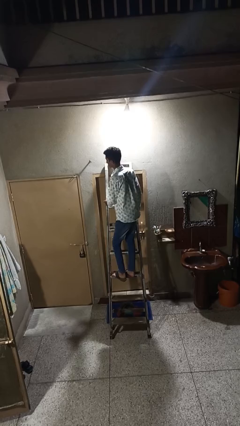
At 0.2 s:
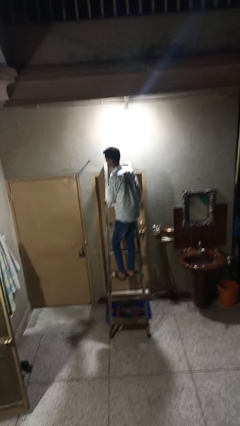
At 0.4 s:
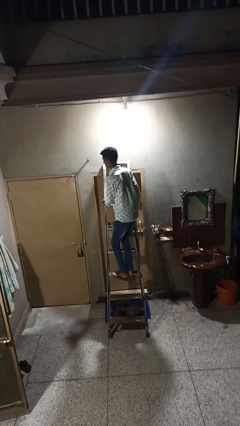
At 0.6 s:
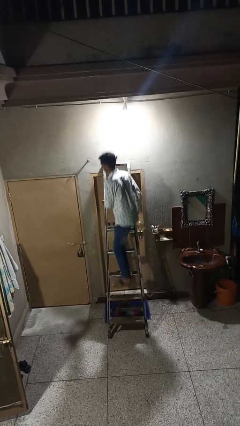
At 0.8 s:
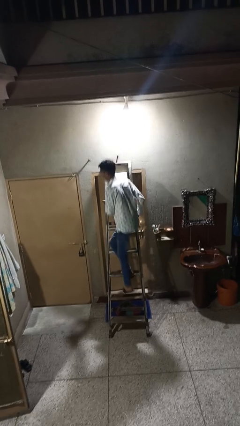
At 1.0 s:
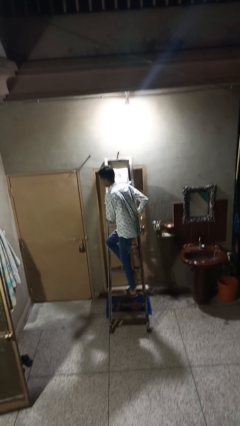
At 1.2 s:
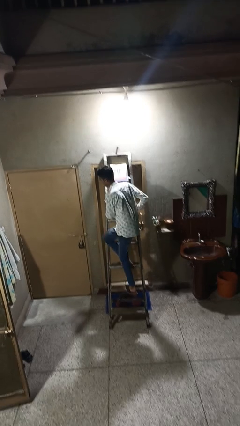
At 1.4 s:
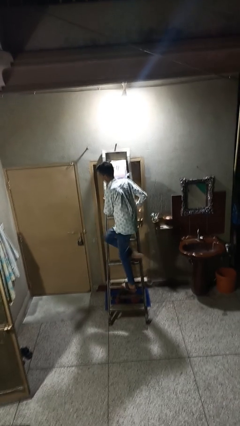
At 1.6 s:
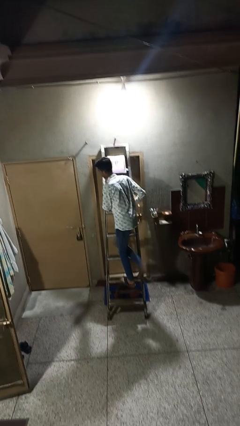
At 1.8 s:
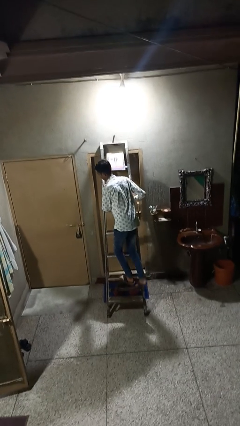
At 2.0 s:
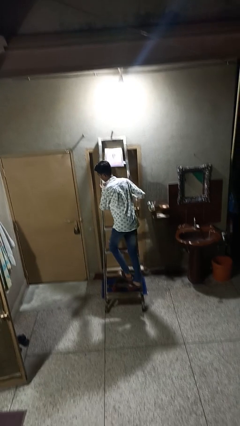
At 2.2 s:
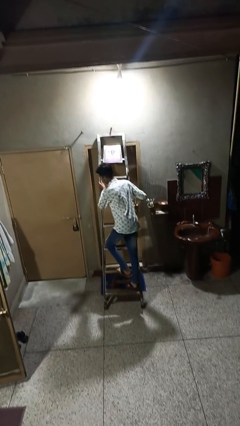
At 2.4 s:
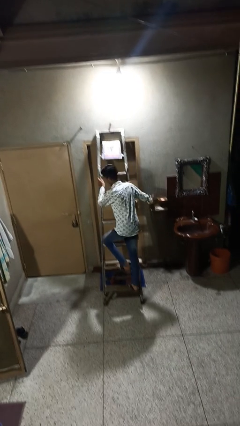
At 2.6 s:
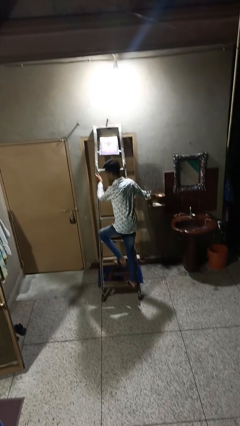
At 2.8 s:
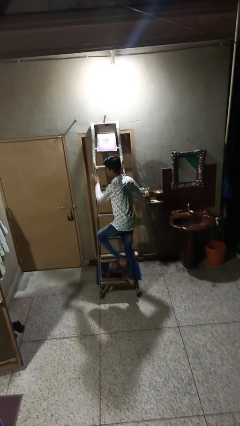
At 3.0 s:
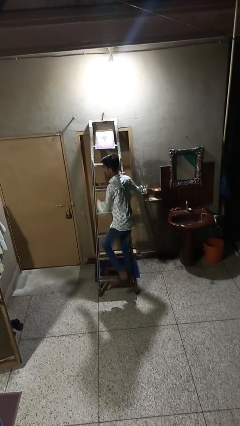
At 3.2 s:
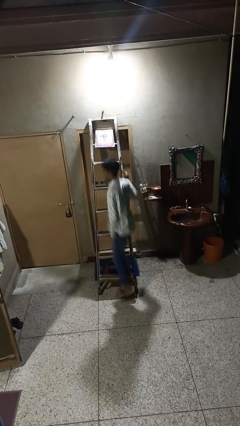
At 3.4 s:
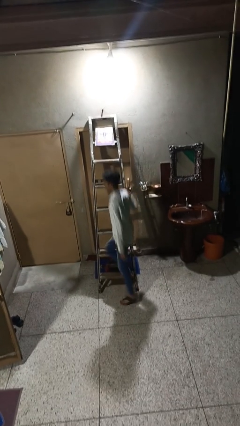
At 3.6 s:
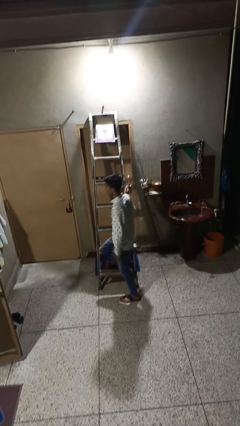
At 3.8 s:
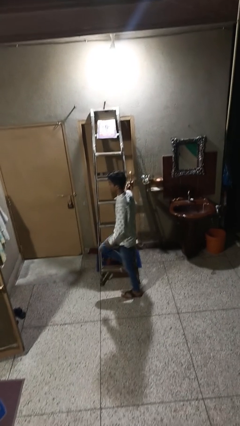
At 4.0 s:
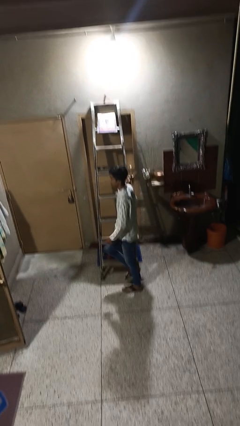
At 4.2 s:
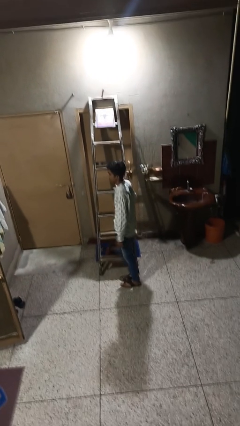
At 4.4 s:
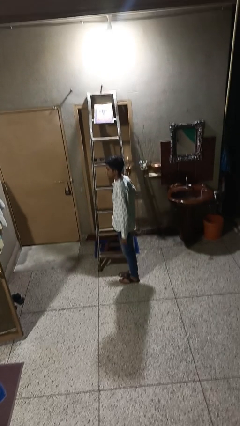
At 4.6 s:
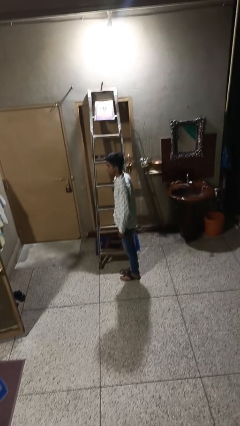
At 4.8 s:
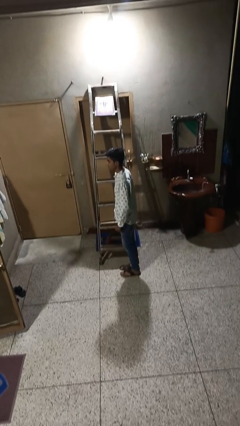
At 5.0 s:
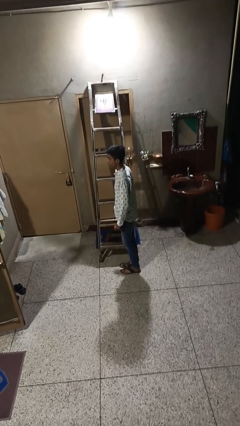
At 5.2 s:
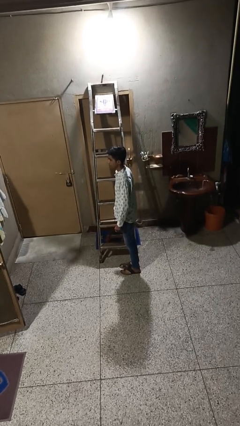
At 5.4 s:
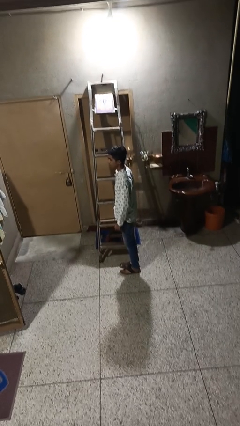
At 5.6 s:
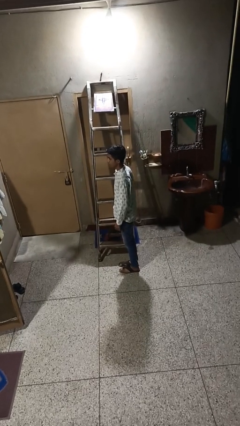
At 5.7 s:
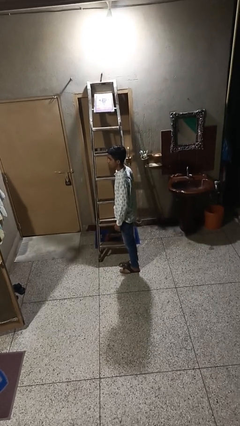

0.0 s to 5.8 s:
person climbs down ladder

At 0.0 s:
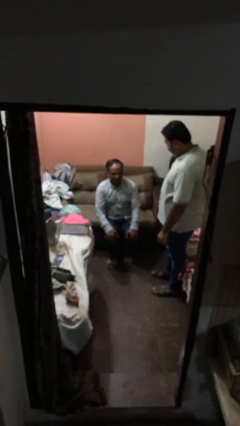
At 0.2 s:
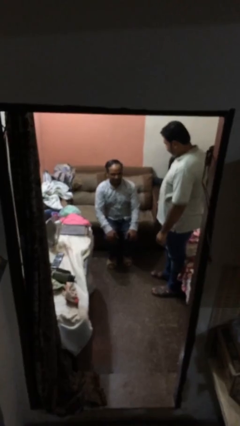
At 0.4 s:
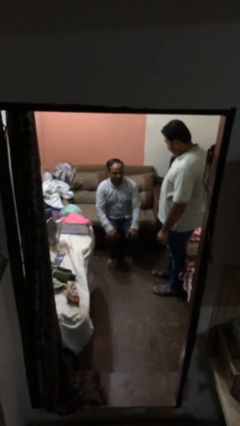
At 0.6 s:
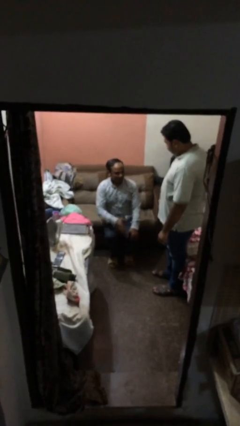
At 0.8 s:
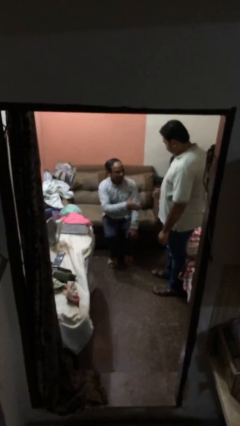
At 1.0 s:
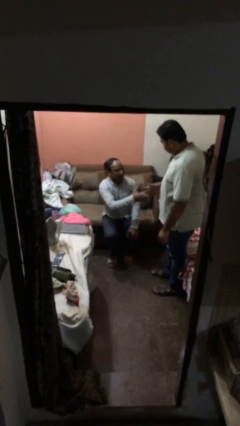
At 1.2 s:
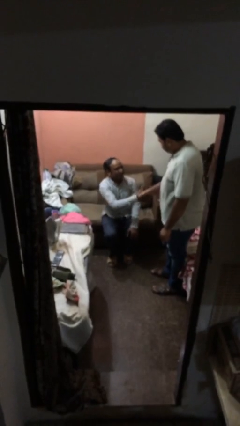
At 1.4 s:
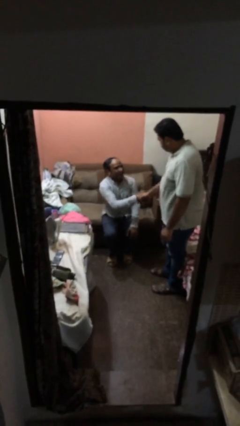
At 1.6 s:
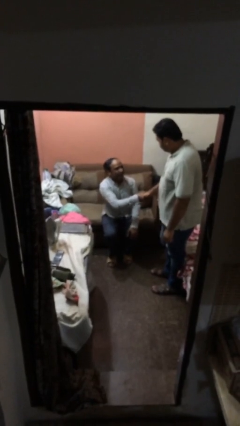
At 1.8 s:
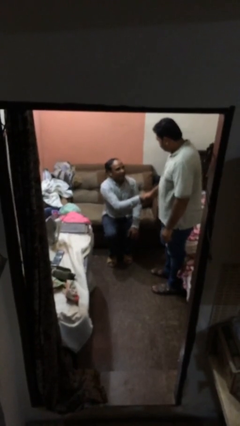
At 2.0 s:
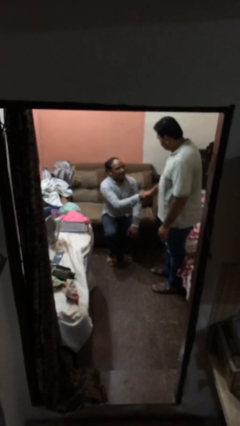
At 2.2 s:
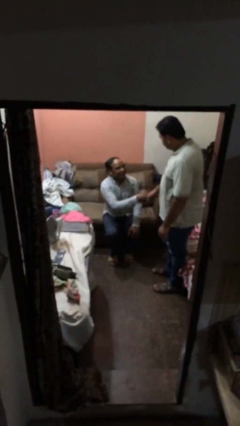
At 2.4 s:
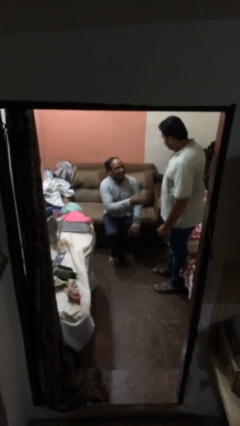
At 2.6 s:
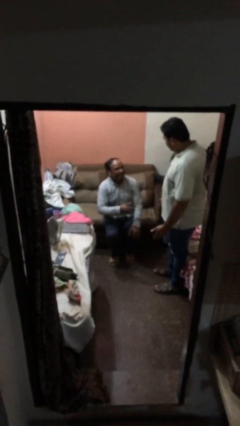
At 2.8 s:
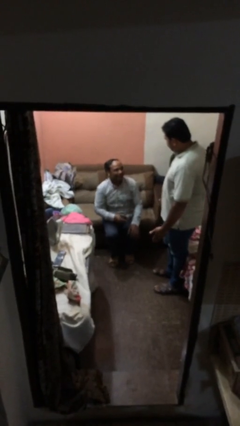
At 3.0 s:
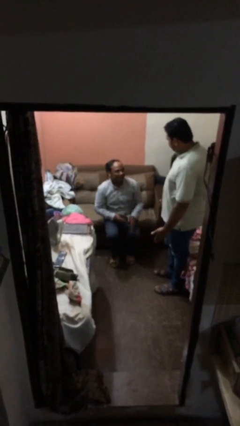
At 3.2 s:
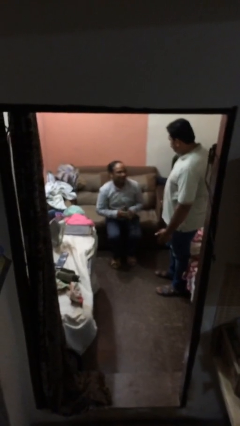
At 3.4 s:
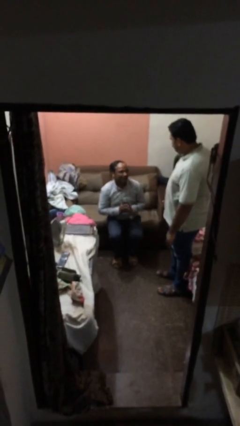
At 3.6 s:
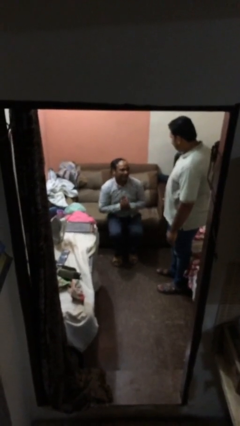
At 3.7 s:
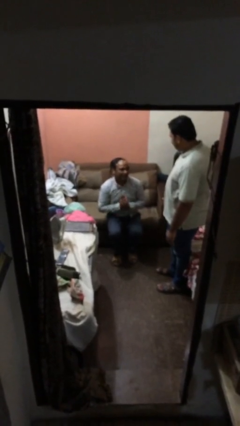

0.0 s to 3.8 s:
person shakes hand

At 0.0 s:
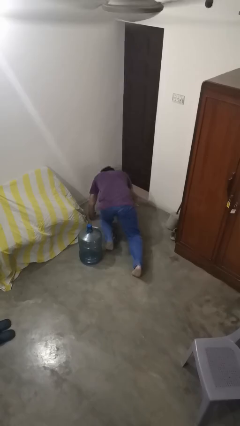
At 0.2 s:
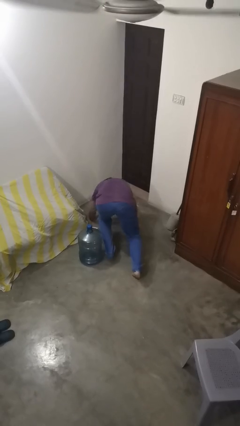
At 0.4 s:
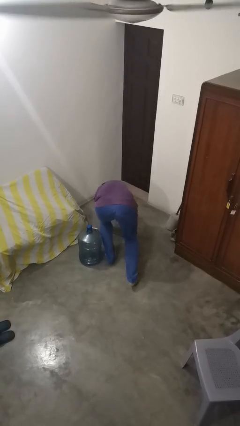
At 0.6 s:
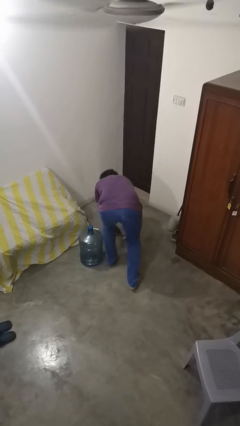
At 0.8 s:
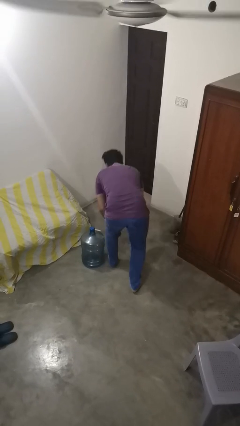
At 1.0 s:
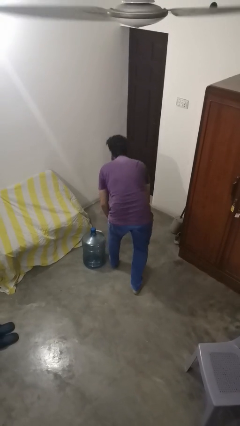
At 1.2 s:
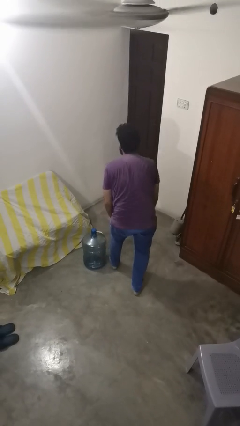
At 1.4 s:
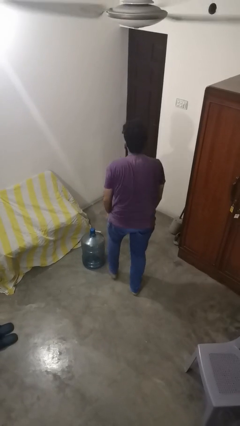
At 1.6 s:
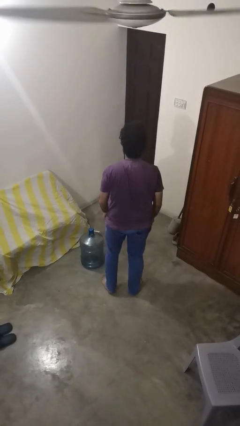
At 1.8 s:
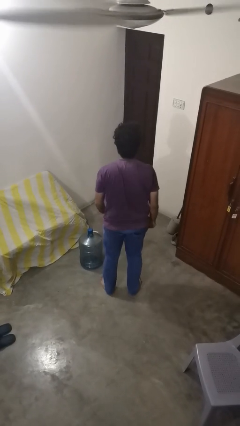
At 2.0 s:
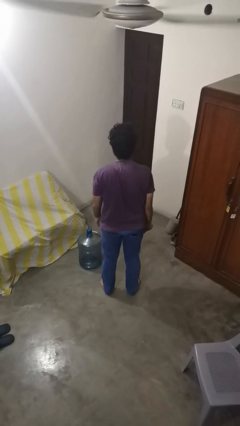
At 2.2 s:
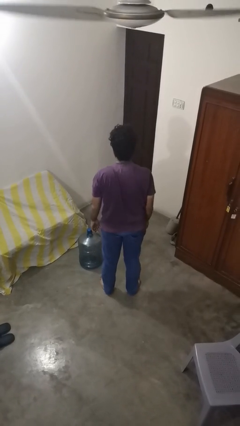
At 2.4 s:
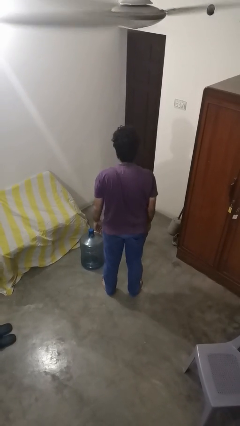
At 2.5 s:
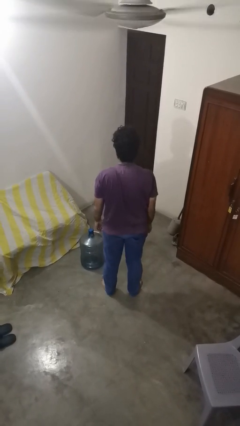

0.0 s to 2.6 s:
person stands up from floor

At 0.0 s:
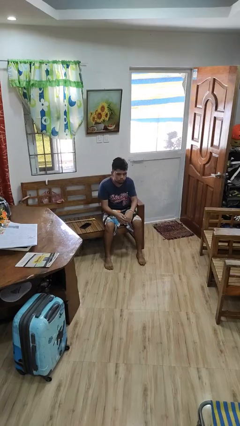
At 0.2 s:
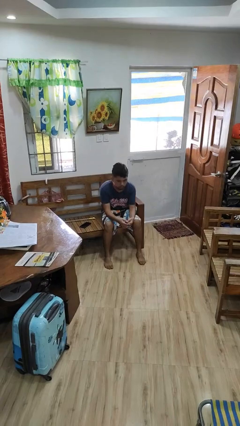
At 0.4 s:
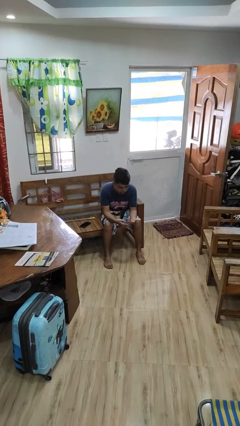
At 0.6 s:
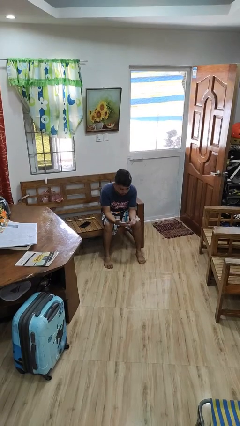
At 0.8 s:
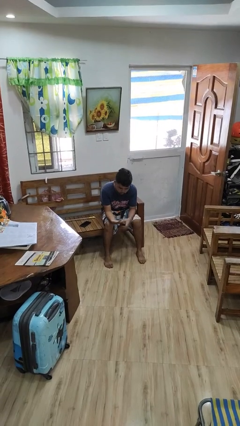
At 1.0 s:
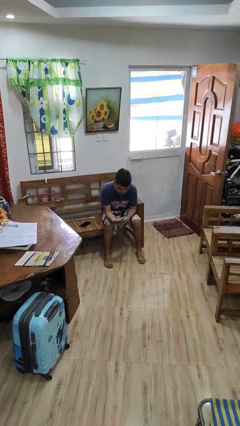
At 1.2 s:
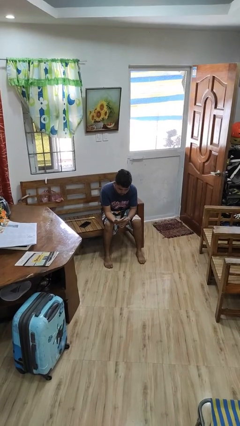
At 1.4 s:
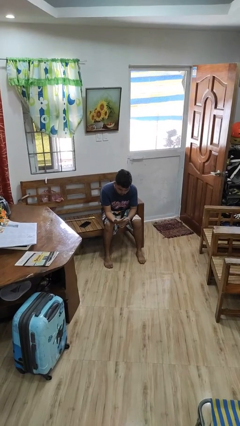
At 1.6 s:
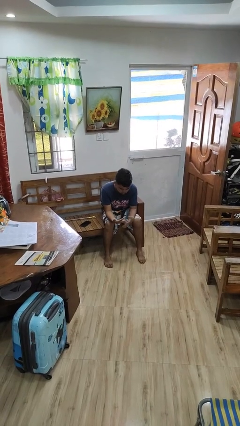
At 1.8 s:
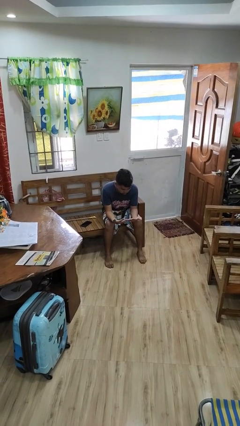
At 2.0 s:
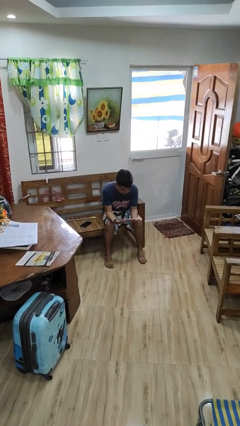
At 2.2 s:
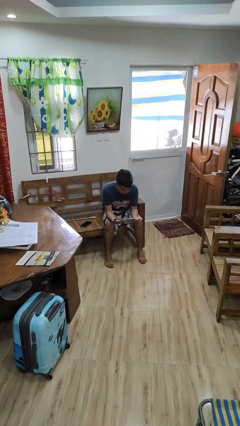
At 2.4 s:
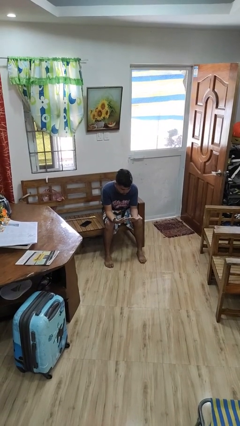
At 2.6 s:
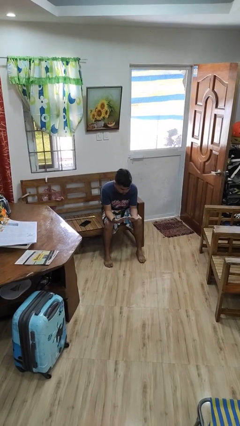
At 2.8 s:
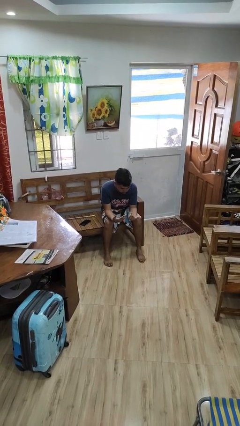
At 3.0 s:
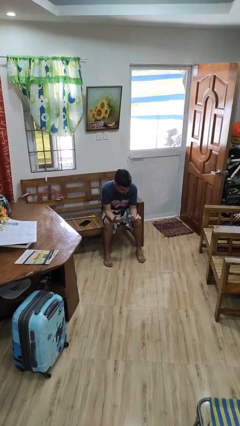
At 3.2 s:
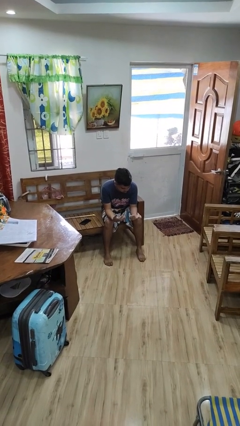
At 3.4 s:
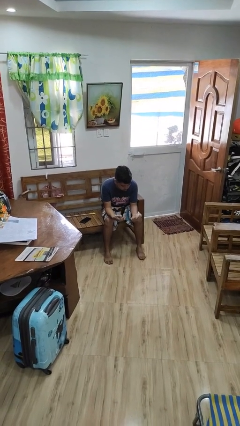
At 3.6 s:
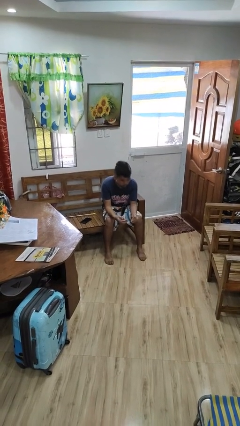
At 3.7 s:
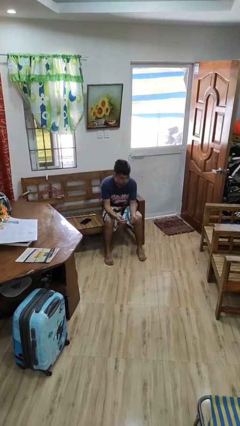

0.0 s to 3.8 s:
person looks at hands in lap

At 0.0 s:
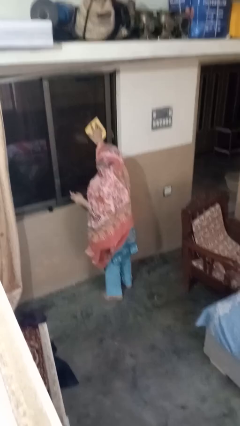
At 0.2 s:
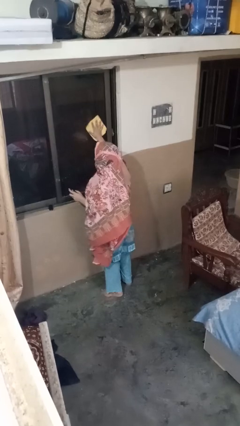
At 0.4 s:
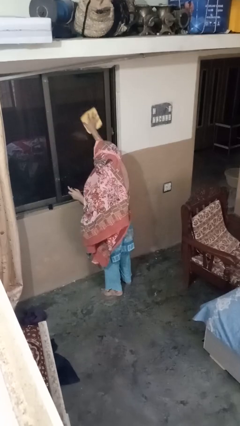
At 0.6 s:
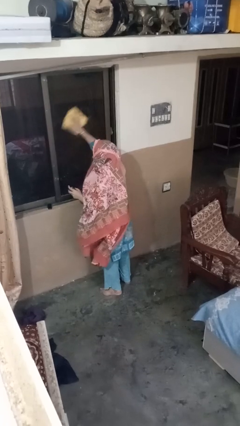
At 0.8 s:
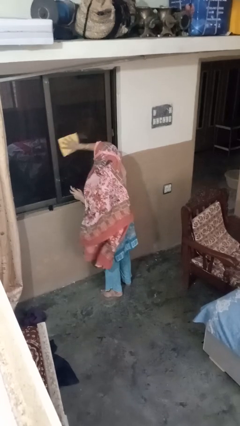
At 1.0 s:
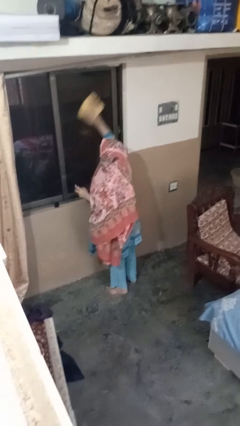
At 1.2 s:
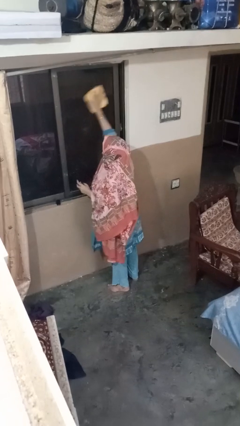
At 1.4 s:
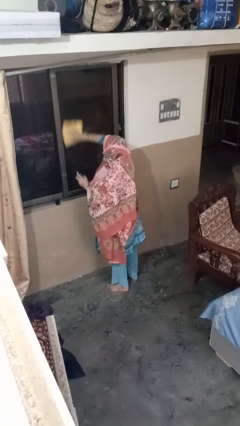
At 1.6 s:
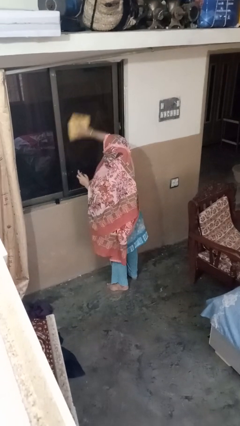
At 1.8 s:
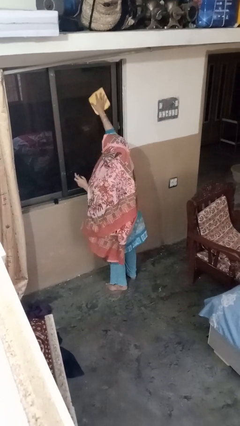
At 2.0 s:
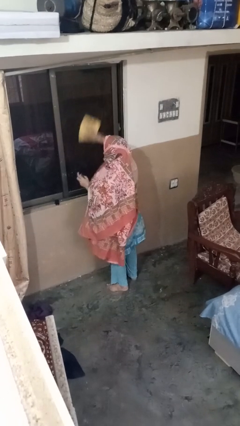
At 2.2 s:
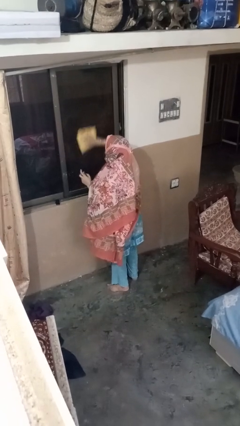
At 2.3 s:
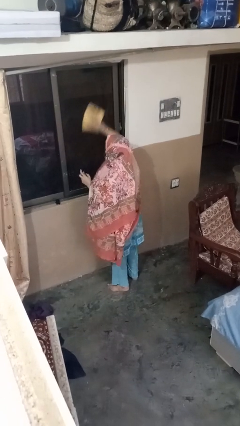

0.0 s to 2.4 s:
person washes window
